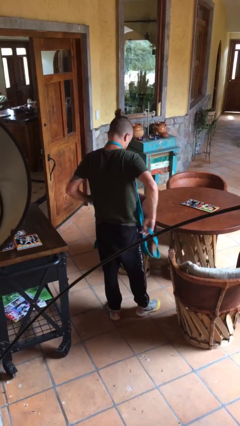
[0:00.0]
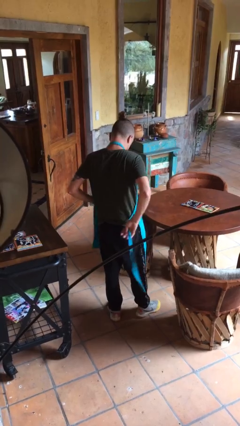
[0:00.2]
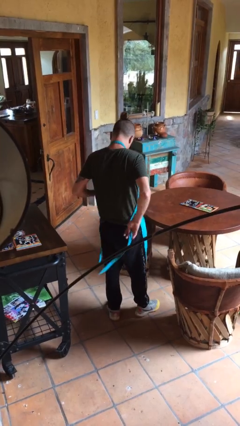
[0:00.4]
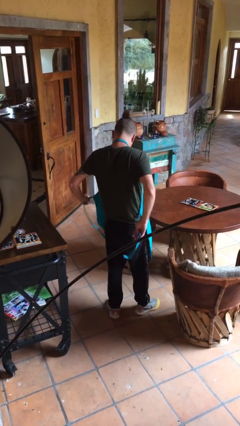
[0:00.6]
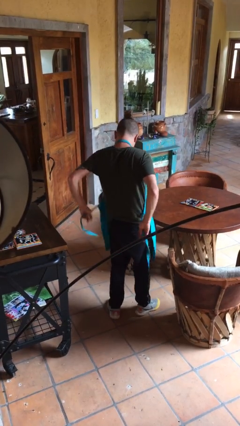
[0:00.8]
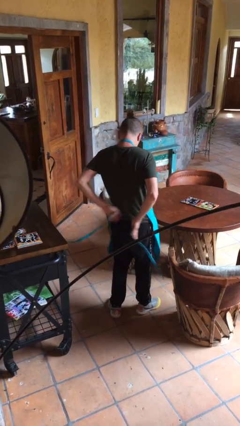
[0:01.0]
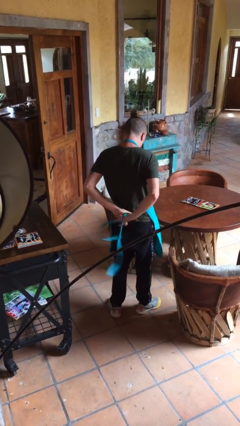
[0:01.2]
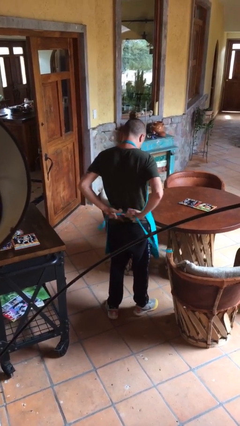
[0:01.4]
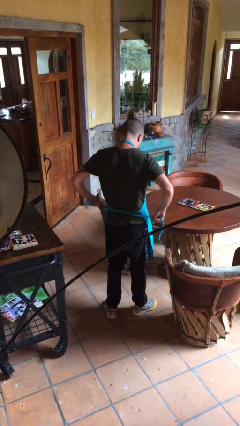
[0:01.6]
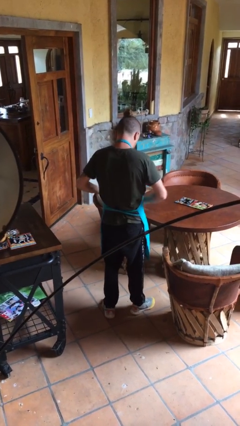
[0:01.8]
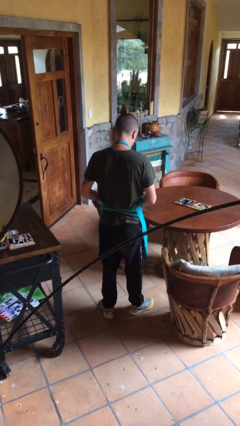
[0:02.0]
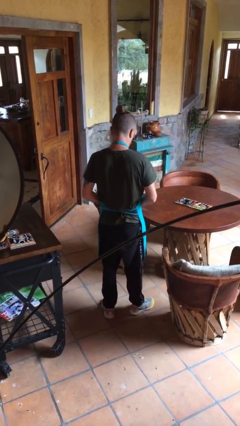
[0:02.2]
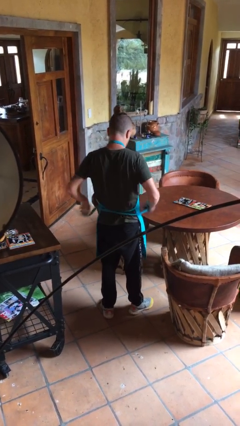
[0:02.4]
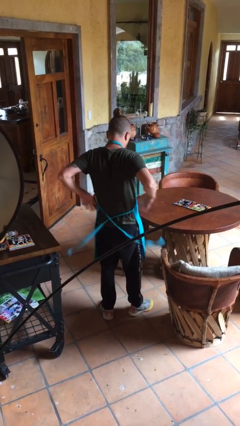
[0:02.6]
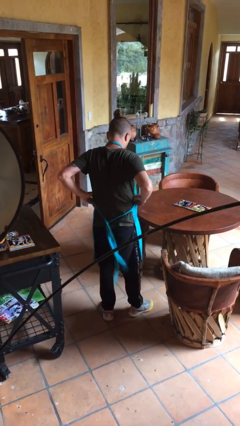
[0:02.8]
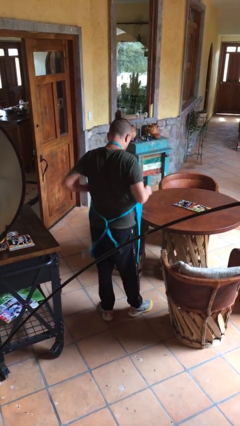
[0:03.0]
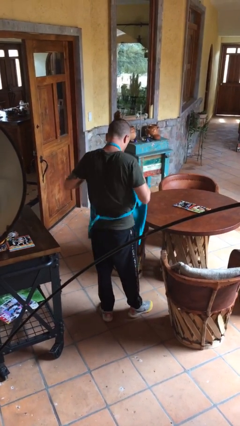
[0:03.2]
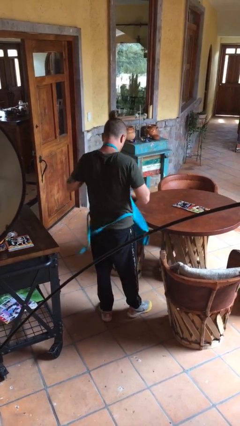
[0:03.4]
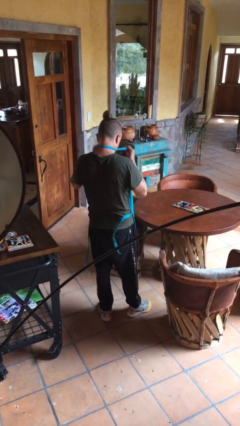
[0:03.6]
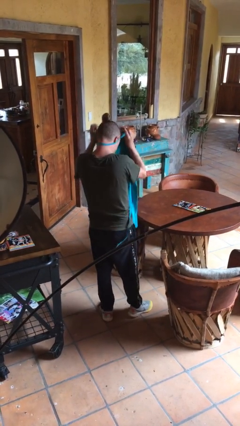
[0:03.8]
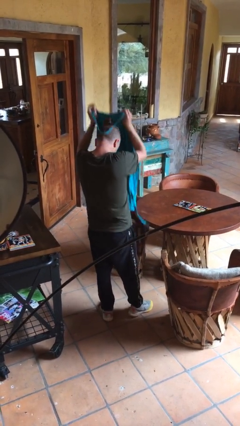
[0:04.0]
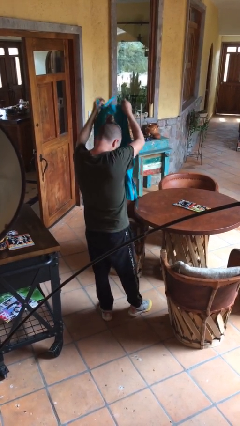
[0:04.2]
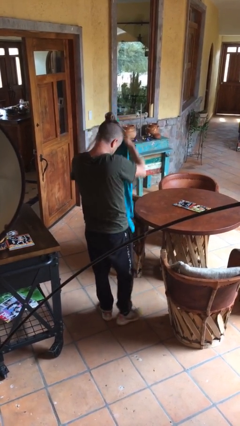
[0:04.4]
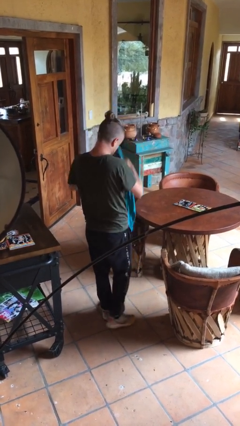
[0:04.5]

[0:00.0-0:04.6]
person takes off apron

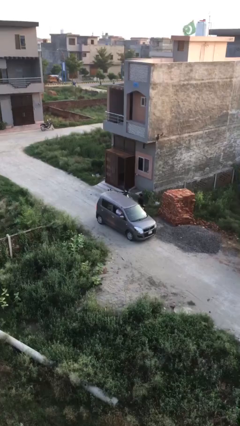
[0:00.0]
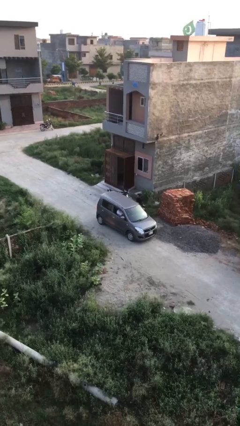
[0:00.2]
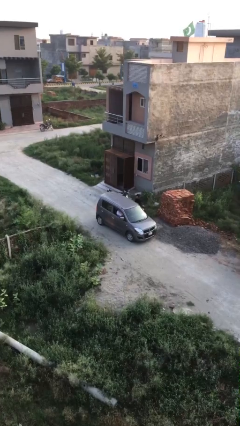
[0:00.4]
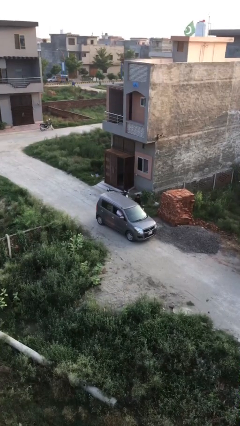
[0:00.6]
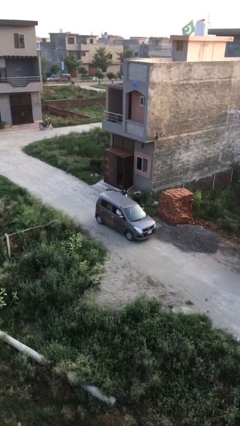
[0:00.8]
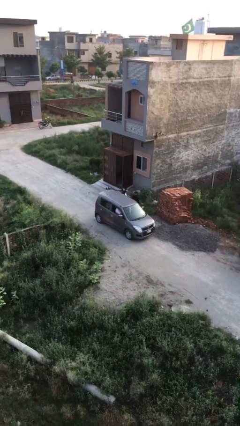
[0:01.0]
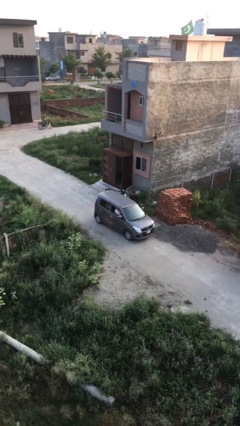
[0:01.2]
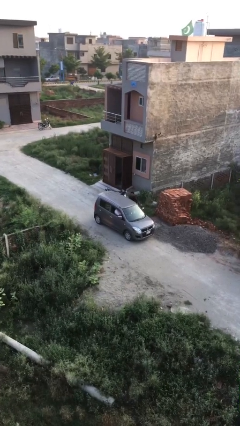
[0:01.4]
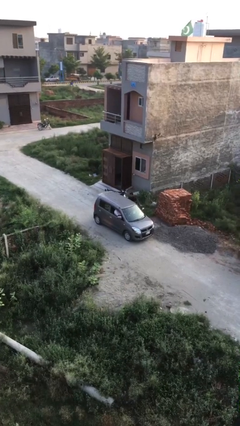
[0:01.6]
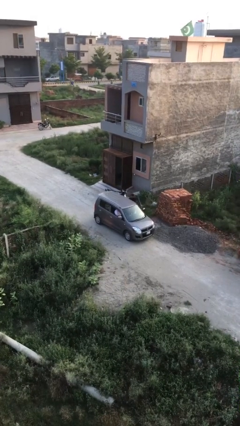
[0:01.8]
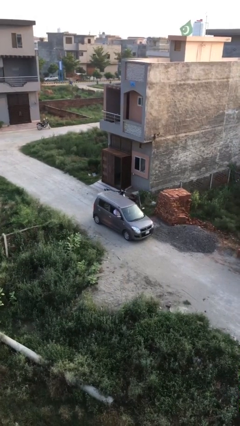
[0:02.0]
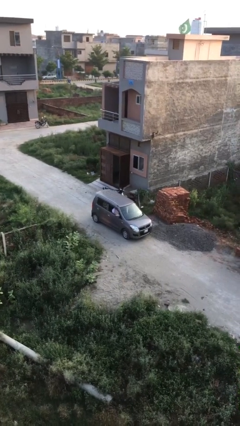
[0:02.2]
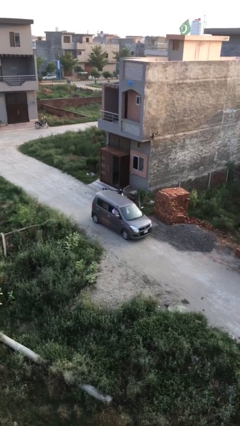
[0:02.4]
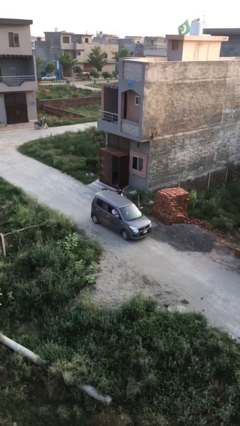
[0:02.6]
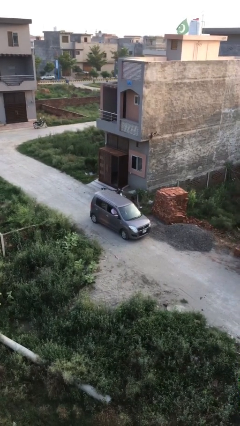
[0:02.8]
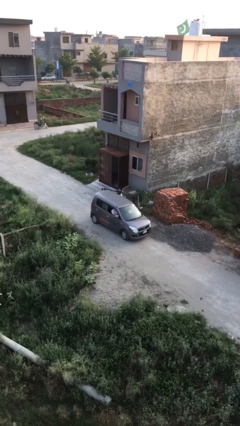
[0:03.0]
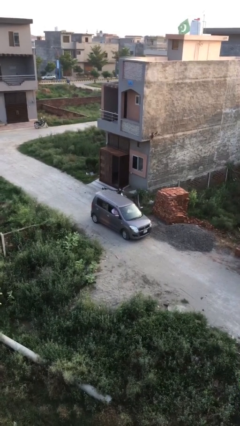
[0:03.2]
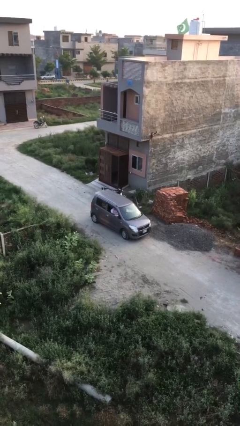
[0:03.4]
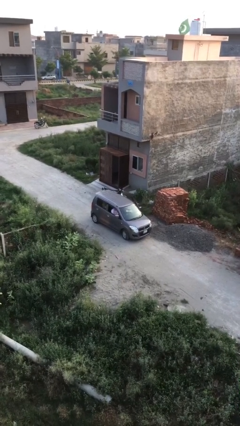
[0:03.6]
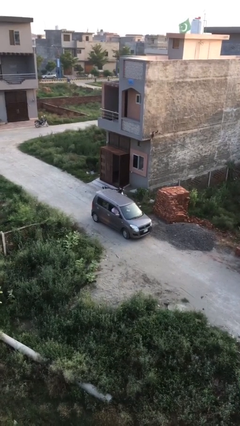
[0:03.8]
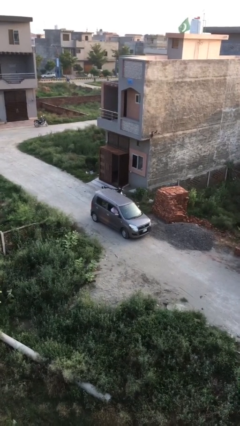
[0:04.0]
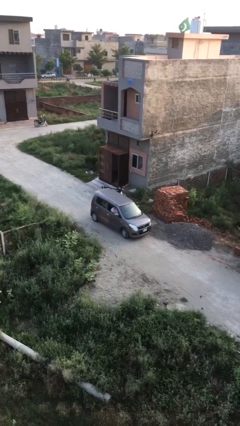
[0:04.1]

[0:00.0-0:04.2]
car picks up person

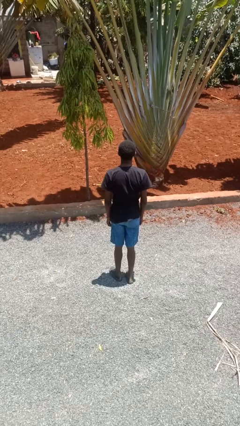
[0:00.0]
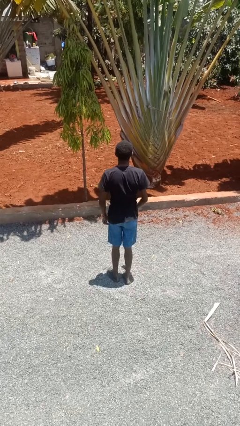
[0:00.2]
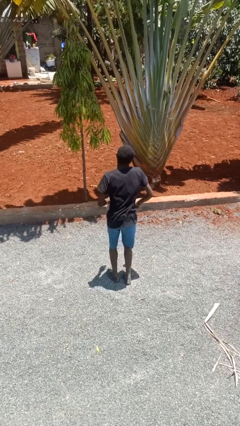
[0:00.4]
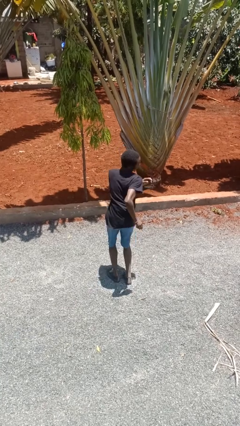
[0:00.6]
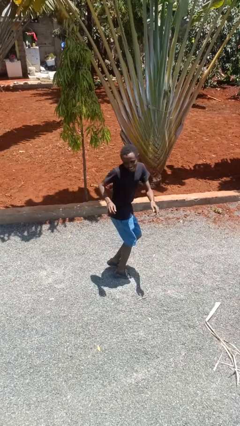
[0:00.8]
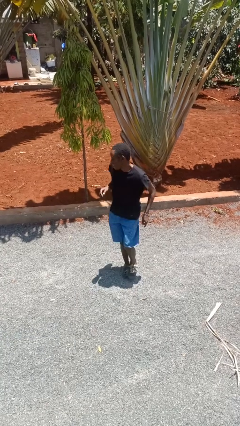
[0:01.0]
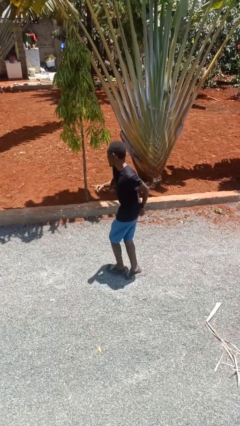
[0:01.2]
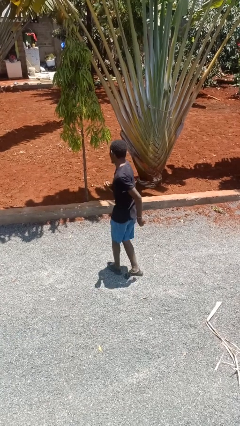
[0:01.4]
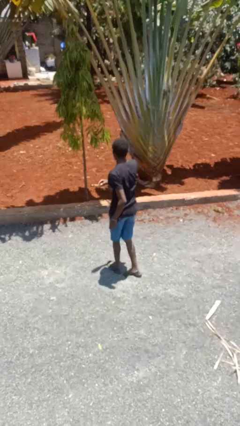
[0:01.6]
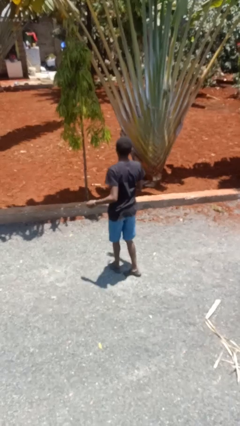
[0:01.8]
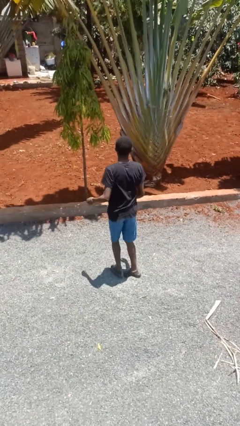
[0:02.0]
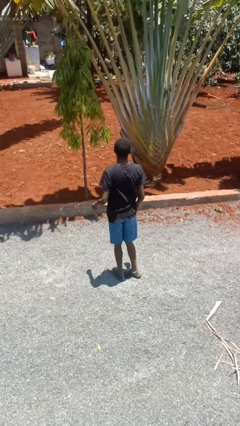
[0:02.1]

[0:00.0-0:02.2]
person twirls

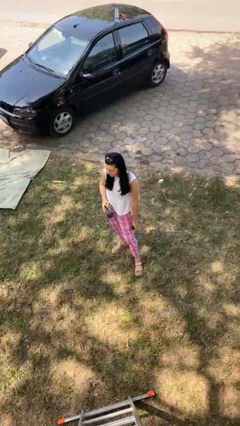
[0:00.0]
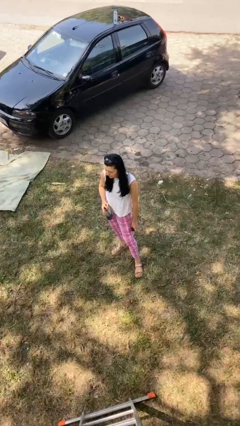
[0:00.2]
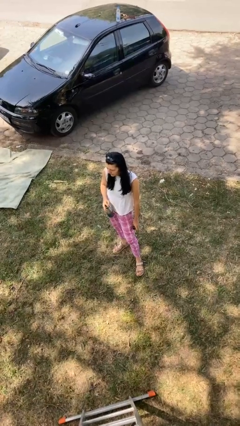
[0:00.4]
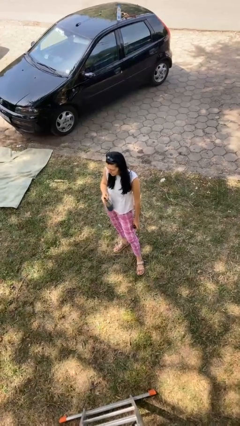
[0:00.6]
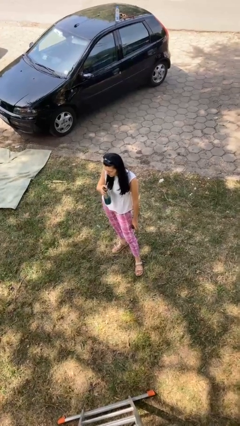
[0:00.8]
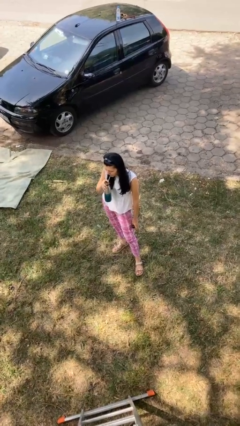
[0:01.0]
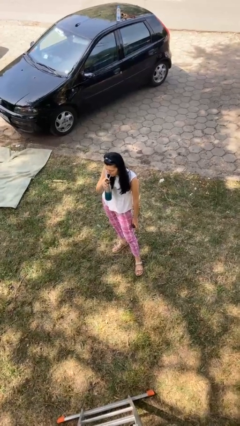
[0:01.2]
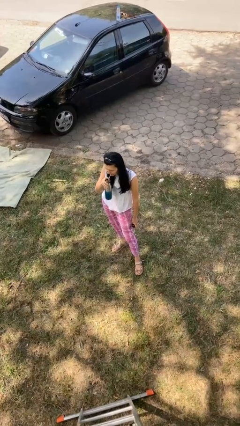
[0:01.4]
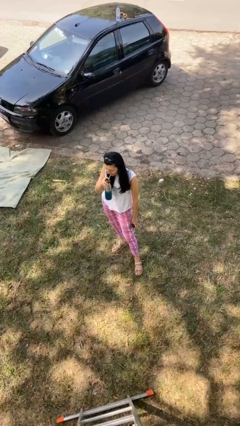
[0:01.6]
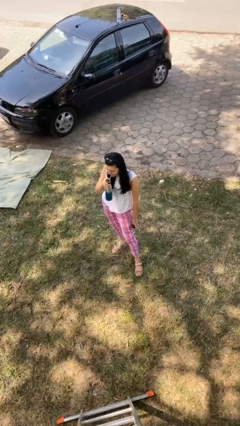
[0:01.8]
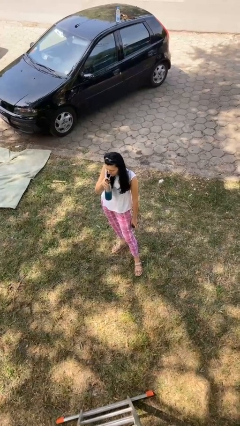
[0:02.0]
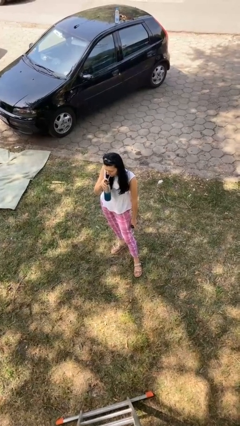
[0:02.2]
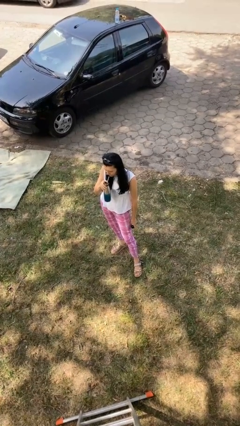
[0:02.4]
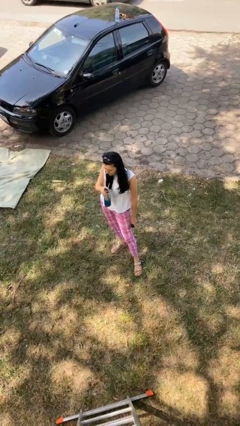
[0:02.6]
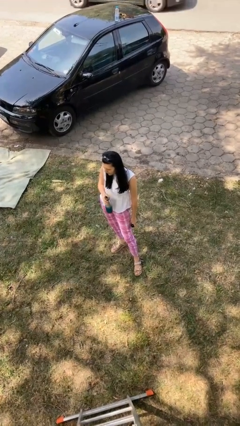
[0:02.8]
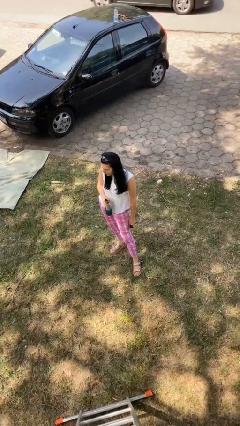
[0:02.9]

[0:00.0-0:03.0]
person drinks from straw

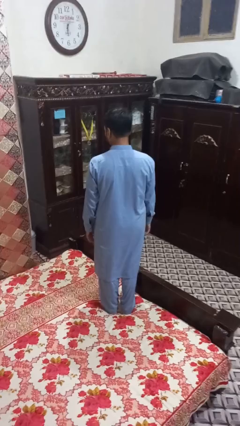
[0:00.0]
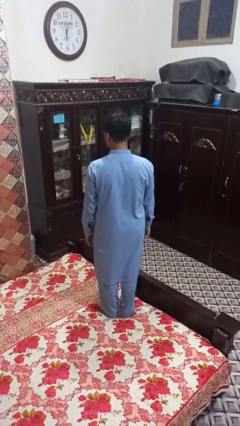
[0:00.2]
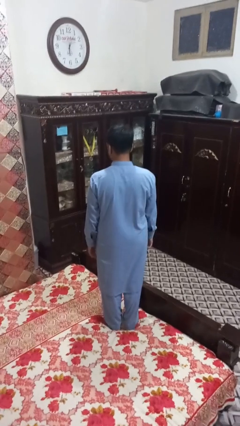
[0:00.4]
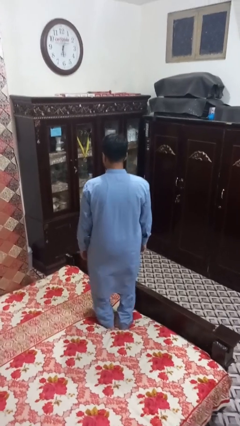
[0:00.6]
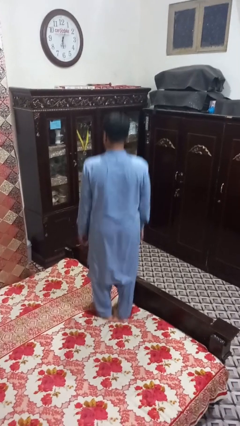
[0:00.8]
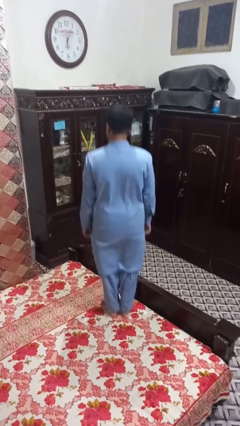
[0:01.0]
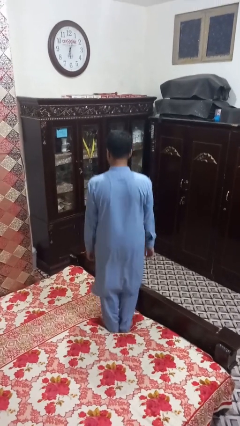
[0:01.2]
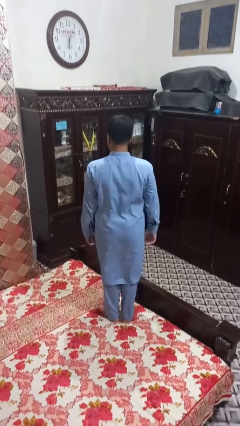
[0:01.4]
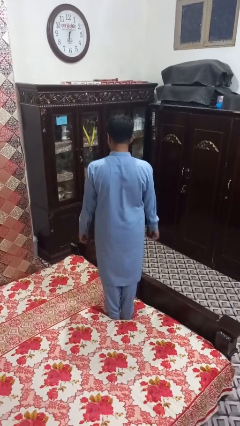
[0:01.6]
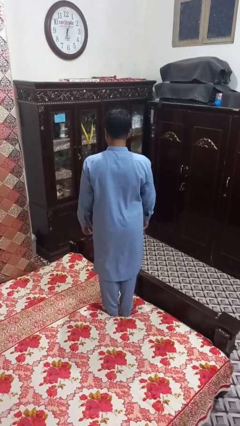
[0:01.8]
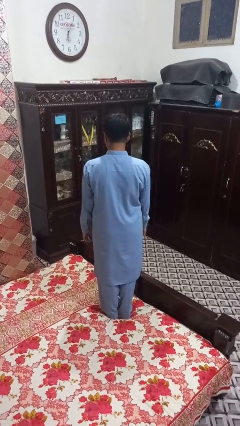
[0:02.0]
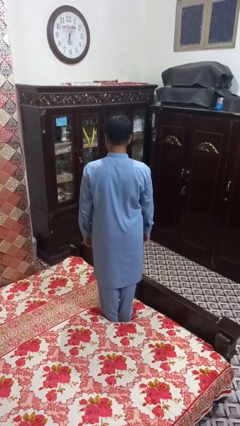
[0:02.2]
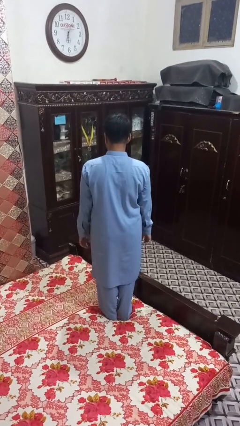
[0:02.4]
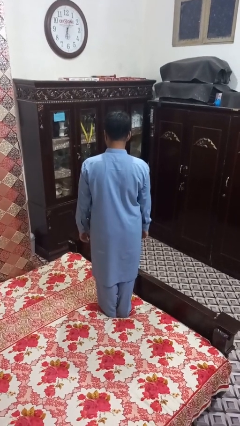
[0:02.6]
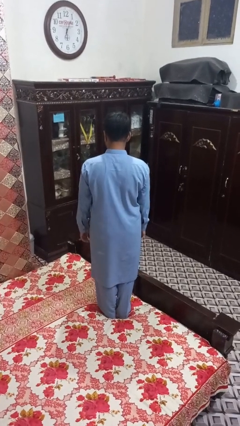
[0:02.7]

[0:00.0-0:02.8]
person jumps on bed

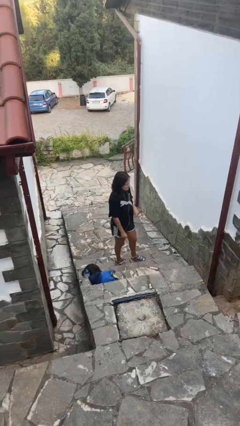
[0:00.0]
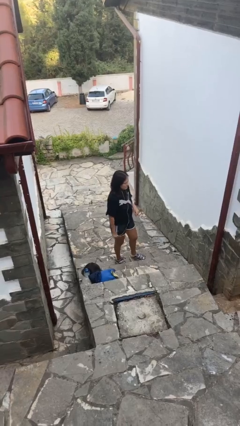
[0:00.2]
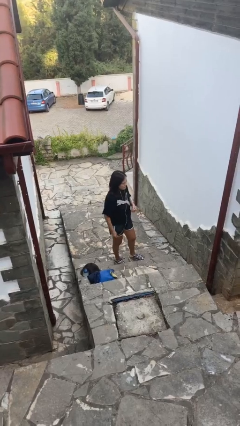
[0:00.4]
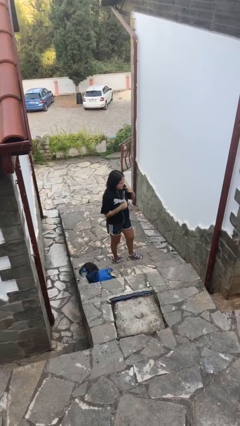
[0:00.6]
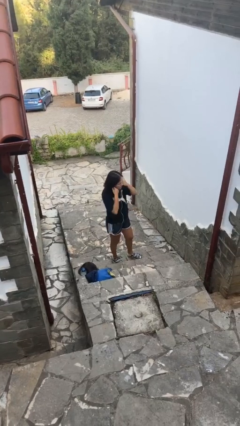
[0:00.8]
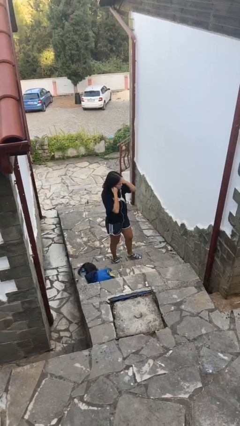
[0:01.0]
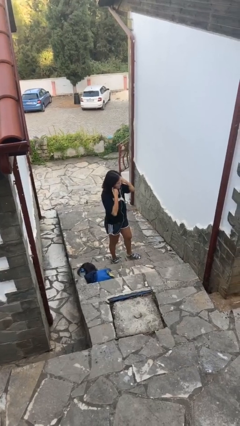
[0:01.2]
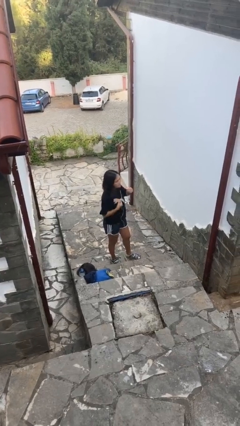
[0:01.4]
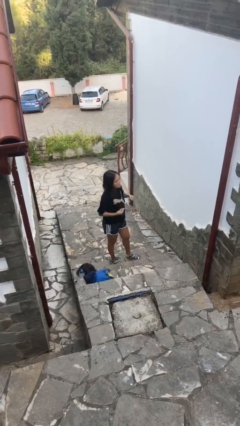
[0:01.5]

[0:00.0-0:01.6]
person takes off headphones
